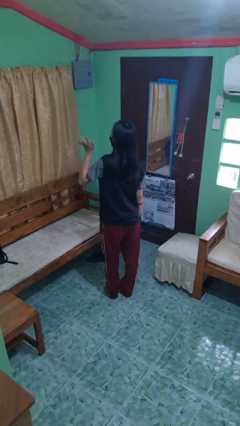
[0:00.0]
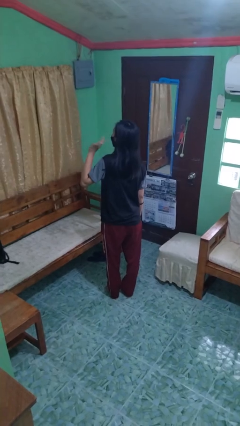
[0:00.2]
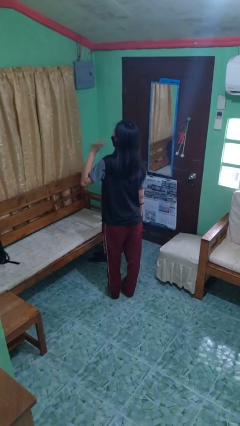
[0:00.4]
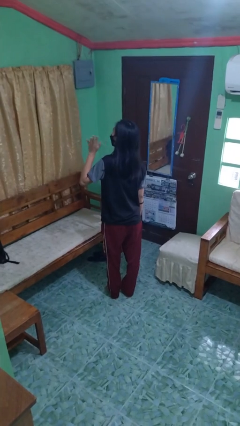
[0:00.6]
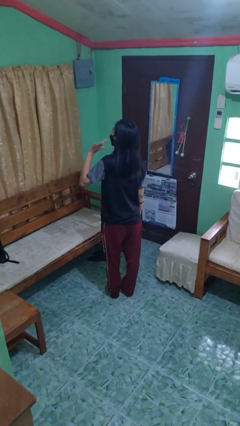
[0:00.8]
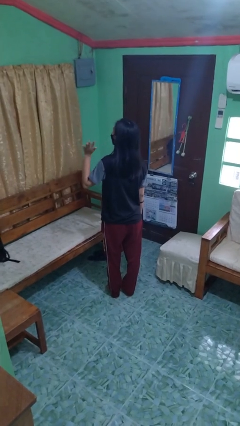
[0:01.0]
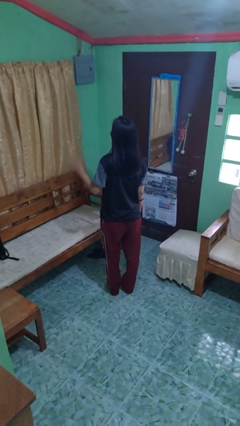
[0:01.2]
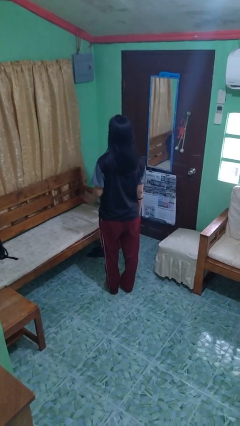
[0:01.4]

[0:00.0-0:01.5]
person waves at person

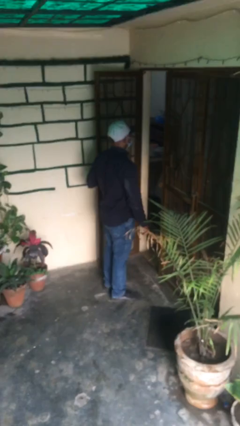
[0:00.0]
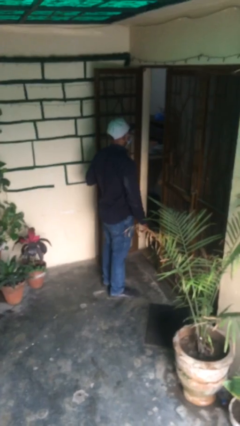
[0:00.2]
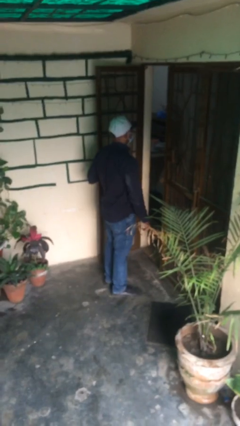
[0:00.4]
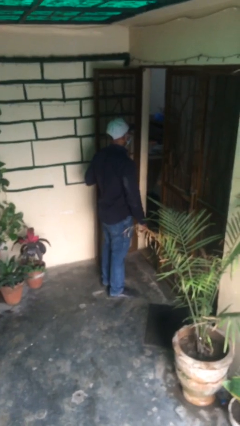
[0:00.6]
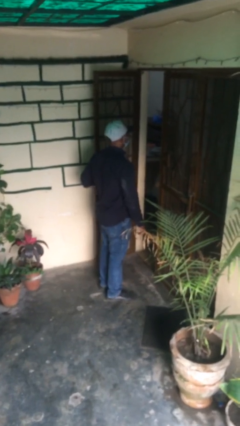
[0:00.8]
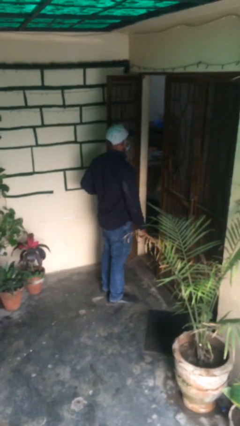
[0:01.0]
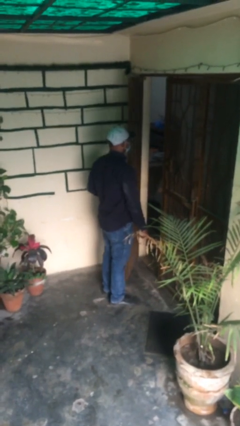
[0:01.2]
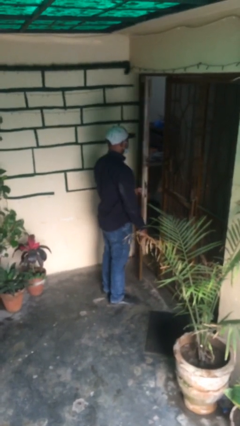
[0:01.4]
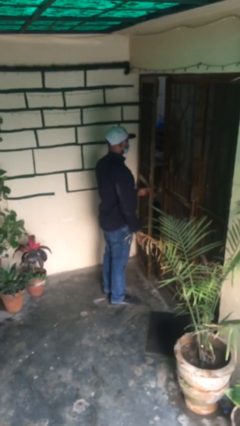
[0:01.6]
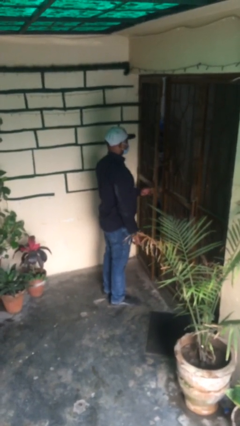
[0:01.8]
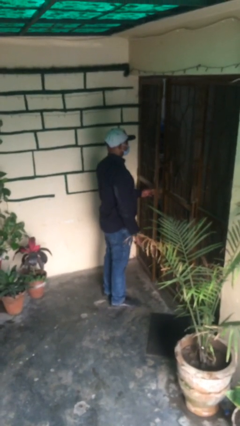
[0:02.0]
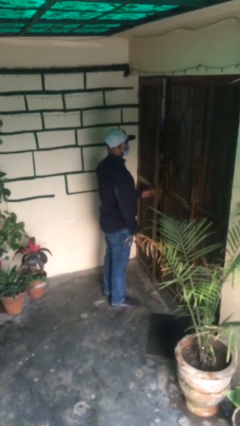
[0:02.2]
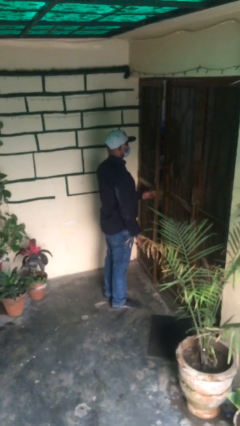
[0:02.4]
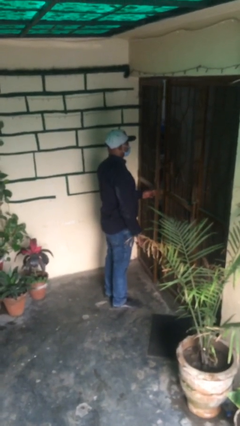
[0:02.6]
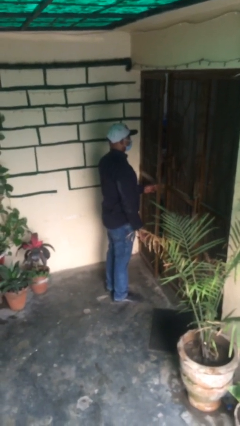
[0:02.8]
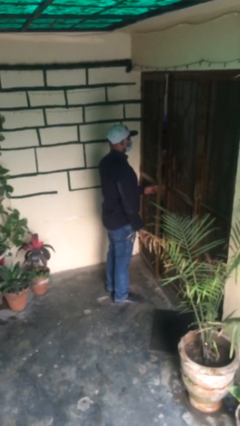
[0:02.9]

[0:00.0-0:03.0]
person closes facility door

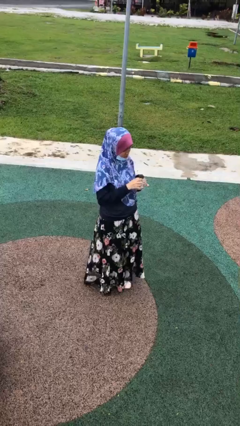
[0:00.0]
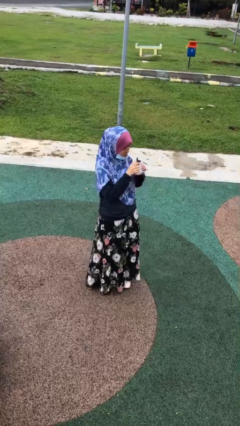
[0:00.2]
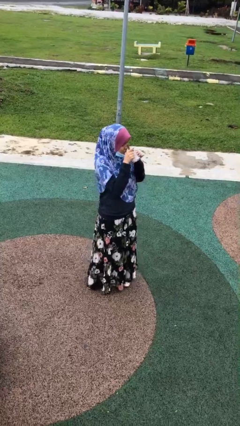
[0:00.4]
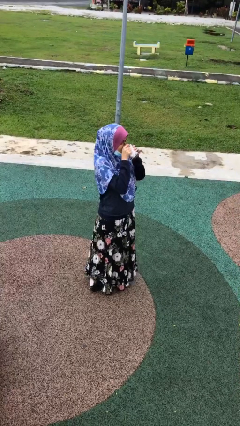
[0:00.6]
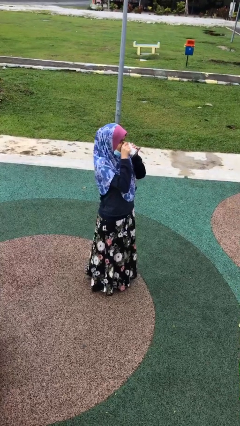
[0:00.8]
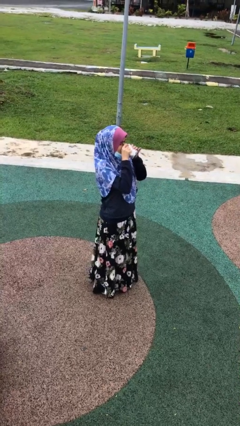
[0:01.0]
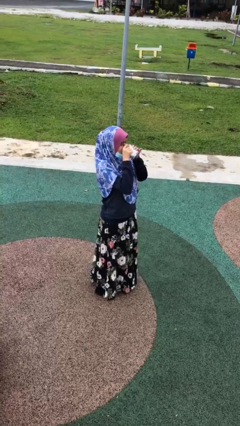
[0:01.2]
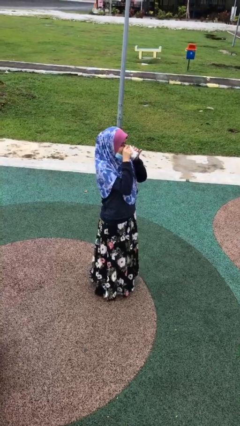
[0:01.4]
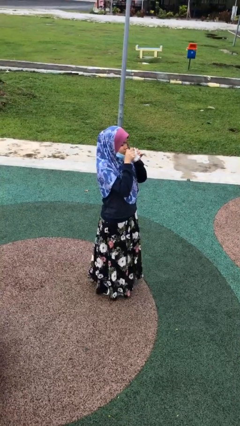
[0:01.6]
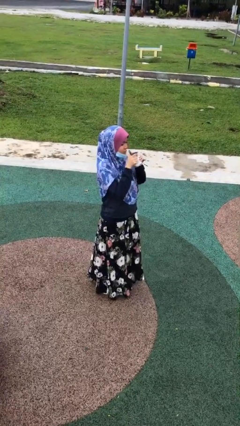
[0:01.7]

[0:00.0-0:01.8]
person drinks from mug

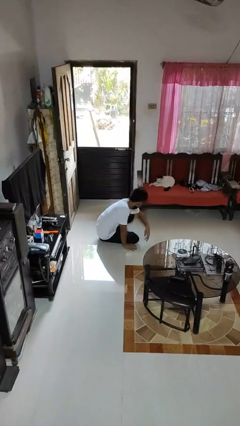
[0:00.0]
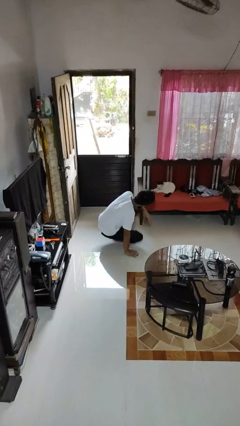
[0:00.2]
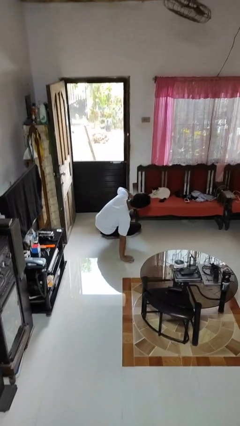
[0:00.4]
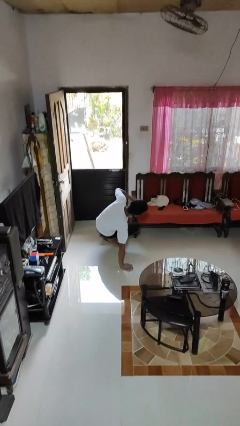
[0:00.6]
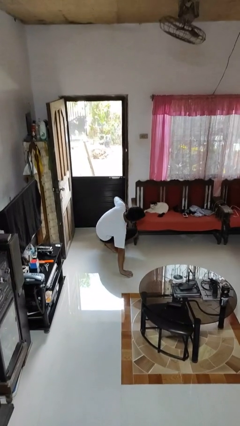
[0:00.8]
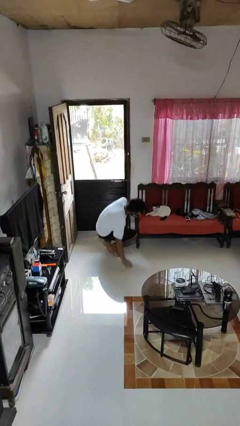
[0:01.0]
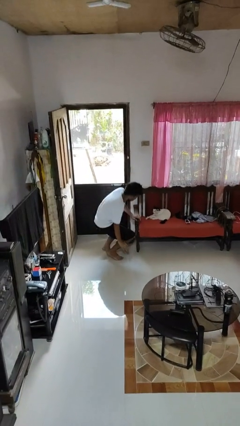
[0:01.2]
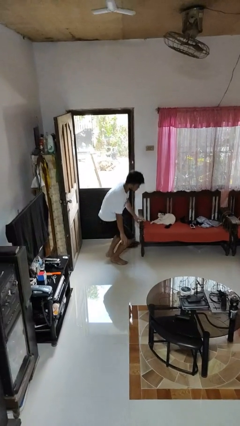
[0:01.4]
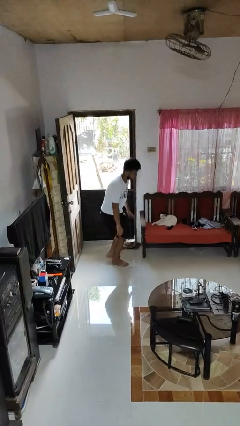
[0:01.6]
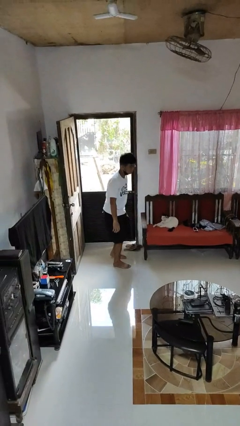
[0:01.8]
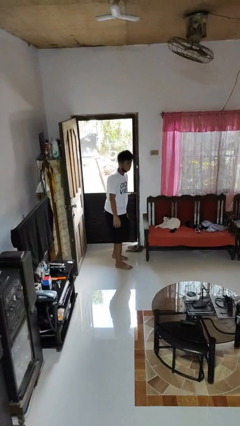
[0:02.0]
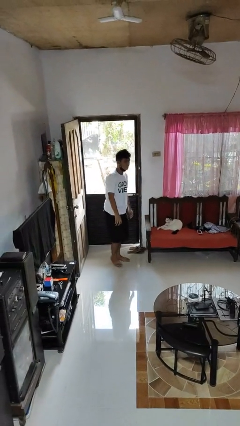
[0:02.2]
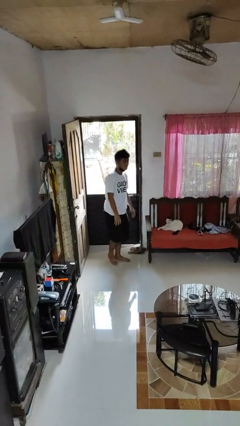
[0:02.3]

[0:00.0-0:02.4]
person stands up from floor

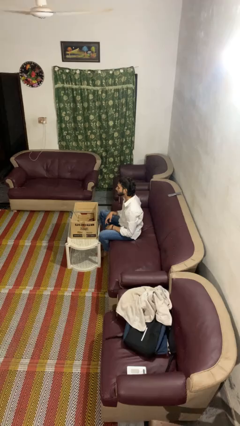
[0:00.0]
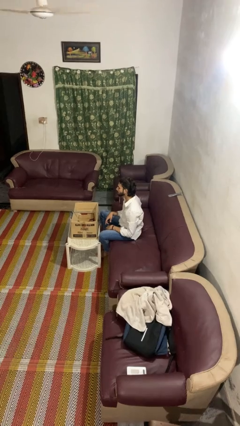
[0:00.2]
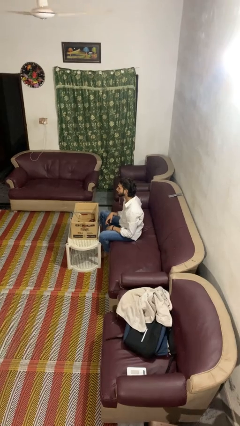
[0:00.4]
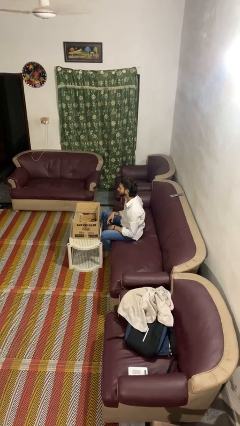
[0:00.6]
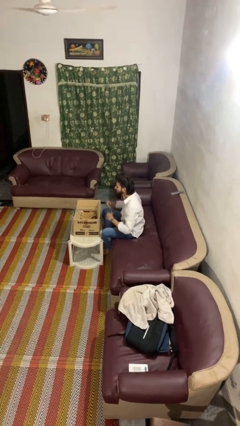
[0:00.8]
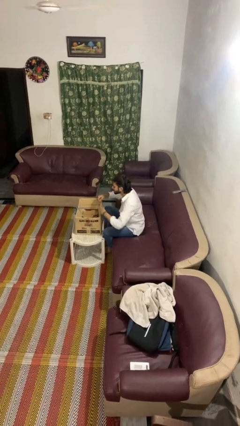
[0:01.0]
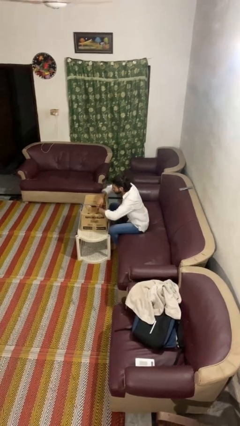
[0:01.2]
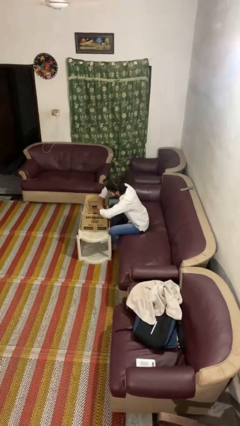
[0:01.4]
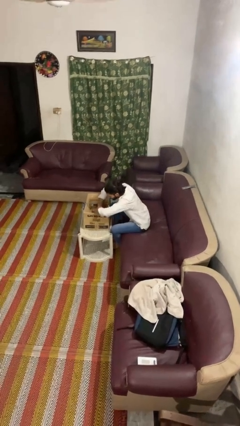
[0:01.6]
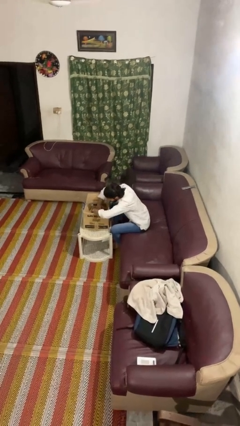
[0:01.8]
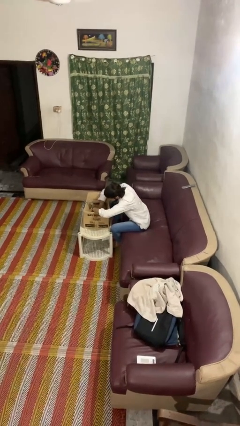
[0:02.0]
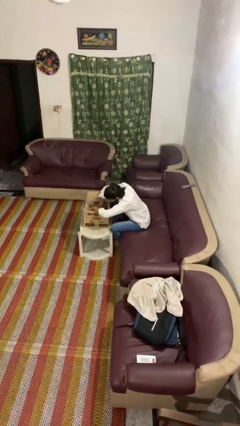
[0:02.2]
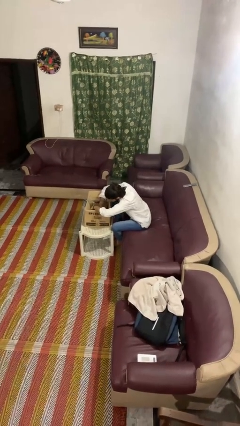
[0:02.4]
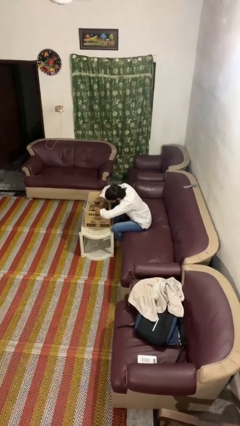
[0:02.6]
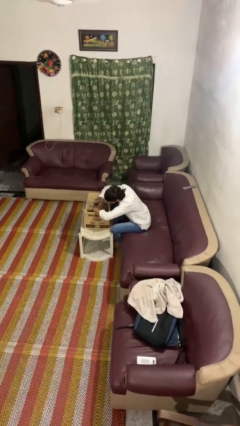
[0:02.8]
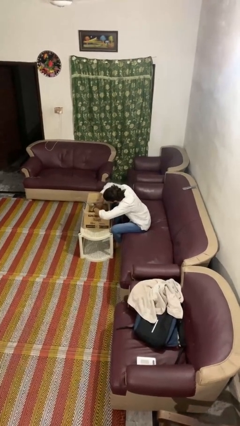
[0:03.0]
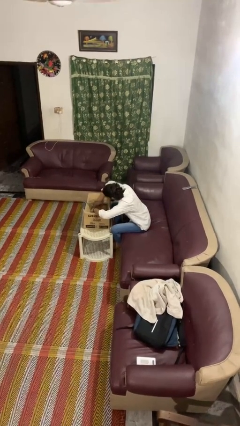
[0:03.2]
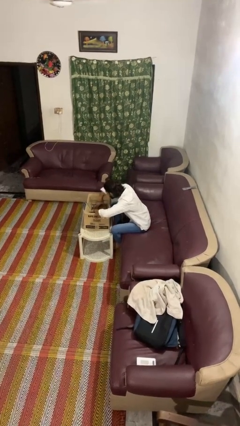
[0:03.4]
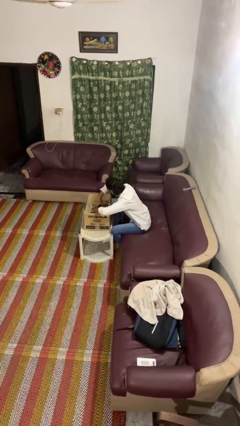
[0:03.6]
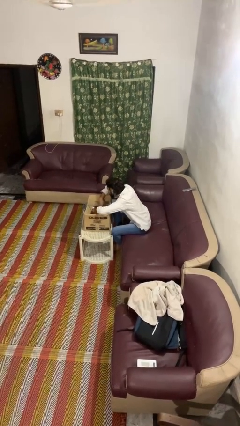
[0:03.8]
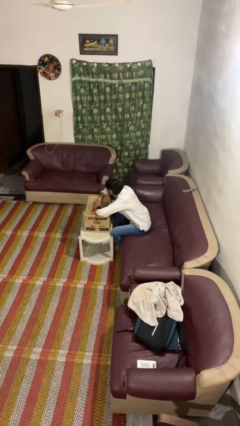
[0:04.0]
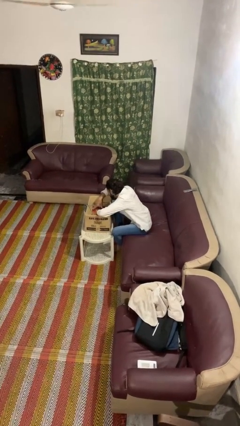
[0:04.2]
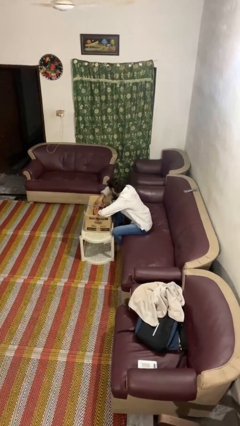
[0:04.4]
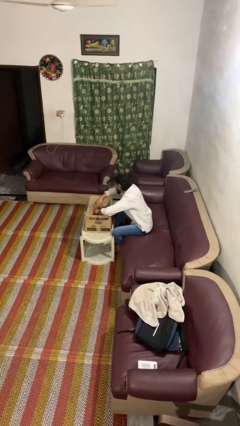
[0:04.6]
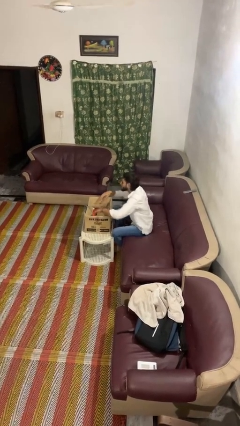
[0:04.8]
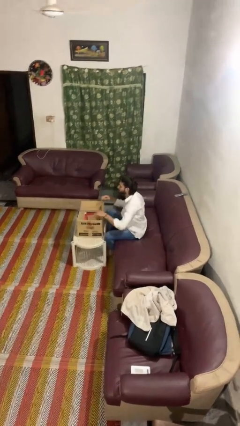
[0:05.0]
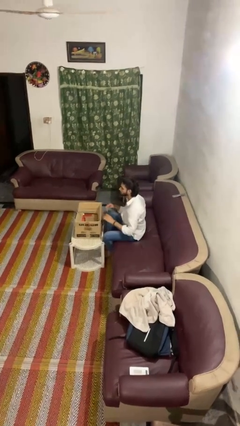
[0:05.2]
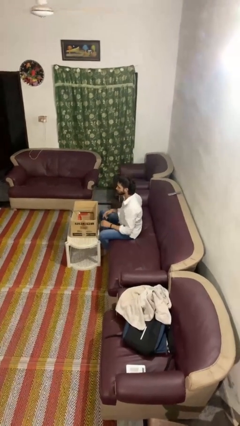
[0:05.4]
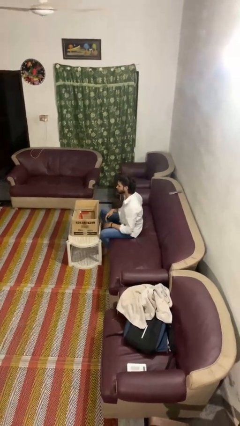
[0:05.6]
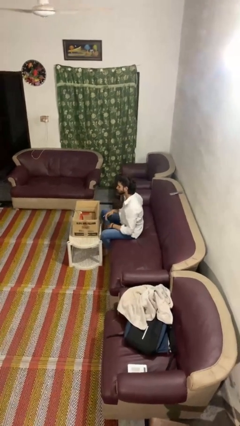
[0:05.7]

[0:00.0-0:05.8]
person searches in box

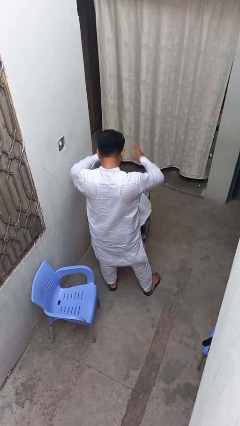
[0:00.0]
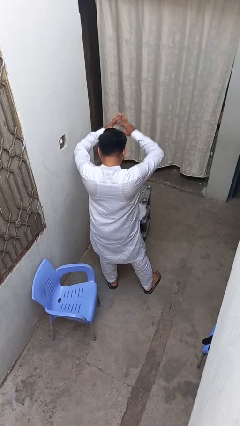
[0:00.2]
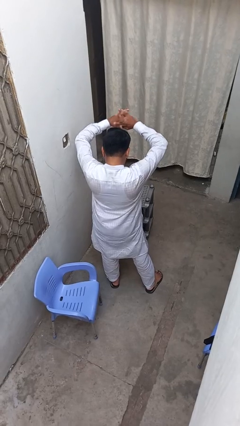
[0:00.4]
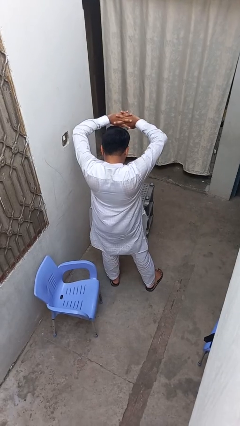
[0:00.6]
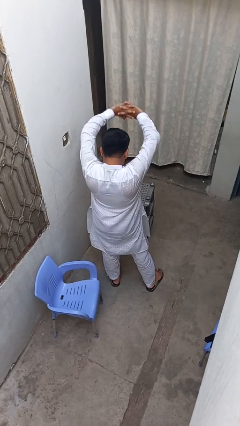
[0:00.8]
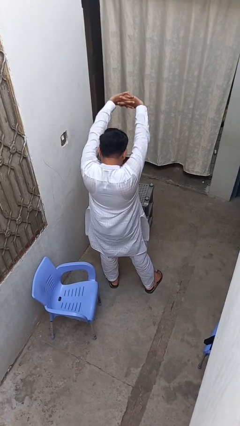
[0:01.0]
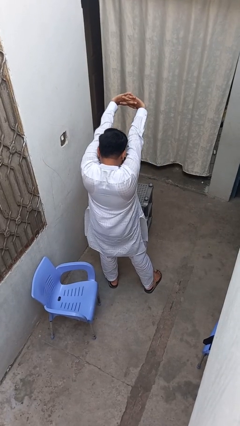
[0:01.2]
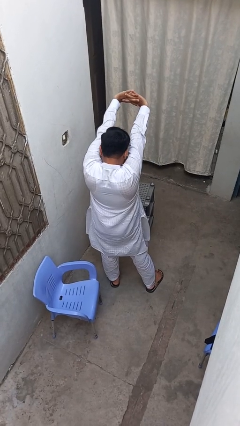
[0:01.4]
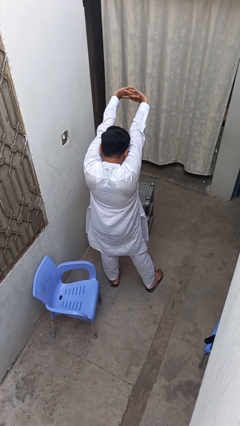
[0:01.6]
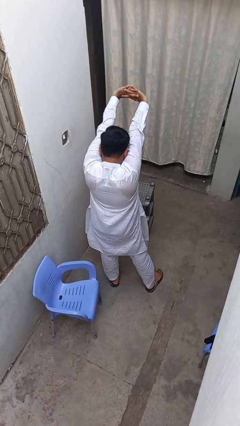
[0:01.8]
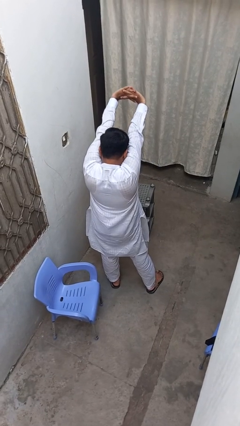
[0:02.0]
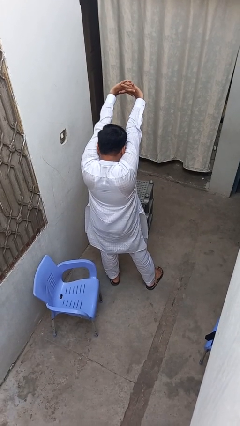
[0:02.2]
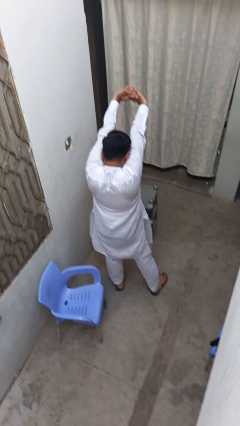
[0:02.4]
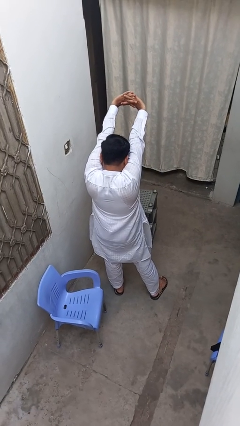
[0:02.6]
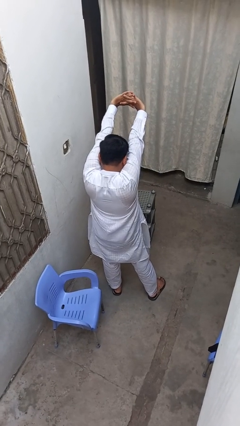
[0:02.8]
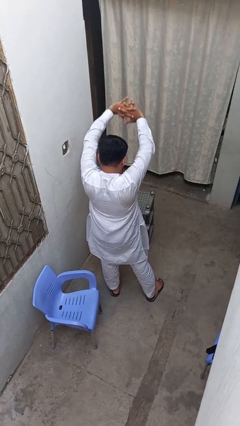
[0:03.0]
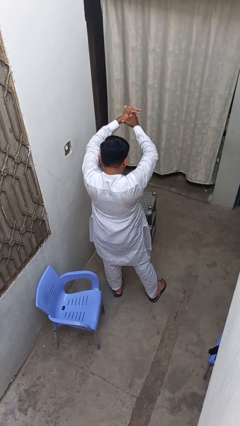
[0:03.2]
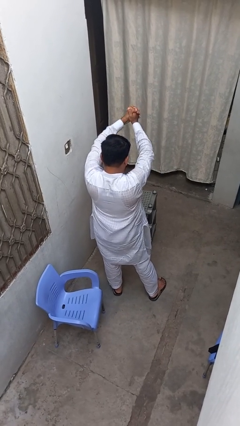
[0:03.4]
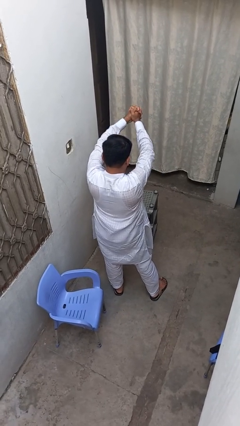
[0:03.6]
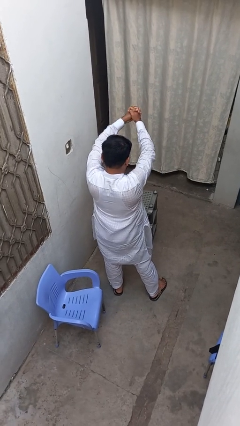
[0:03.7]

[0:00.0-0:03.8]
person snaps fingers
